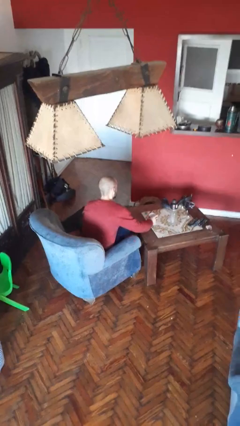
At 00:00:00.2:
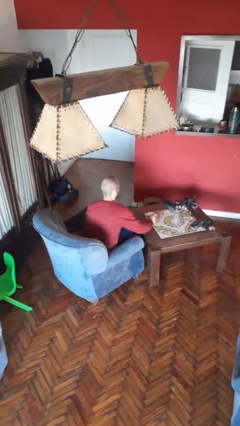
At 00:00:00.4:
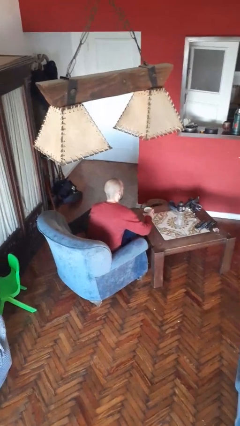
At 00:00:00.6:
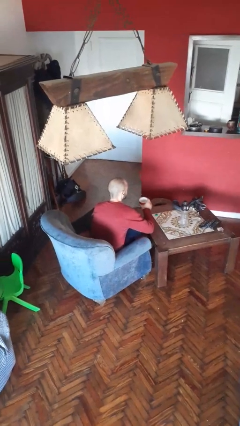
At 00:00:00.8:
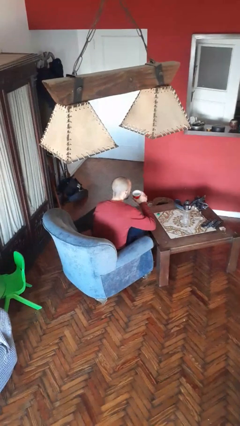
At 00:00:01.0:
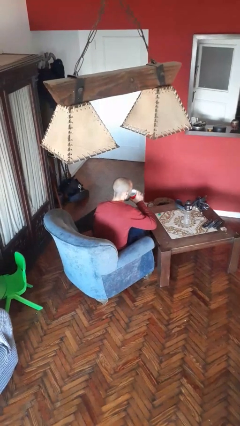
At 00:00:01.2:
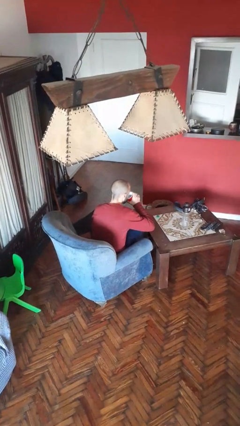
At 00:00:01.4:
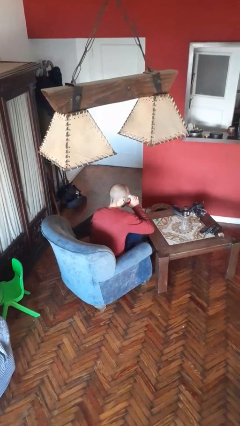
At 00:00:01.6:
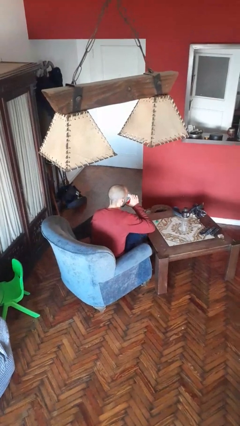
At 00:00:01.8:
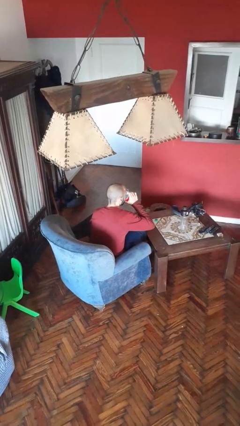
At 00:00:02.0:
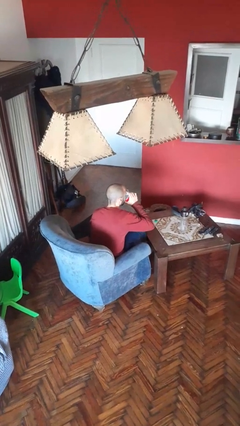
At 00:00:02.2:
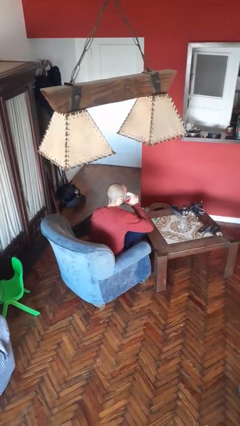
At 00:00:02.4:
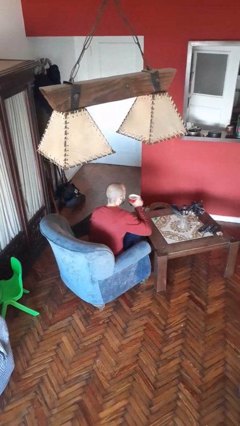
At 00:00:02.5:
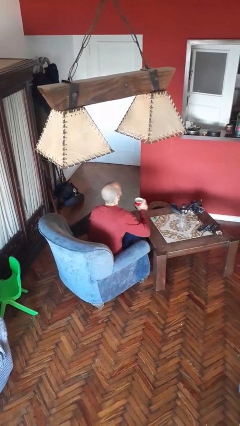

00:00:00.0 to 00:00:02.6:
person drinks from cup

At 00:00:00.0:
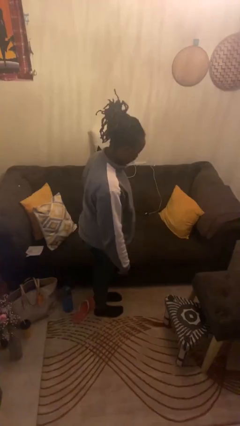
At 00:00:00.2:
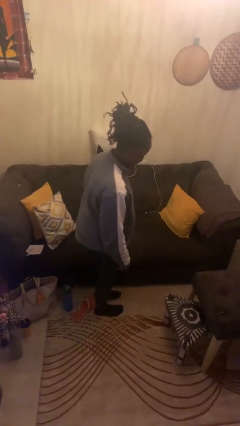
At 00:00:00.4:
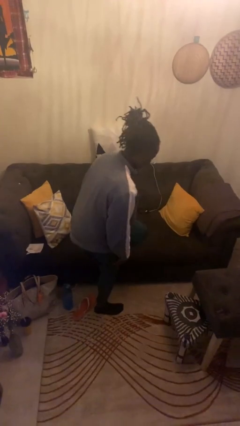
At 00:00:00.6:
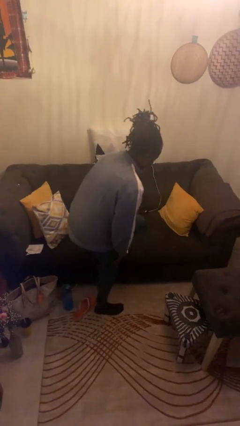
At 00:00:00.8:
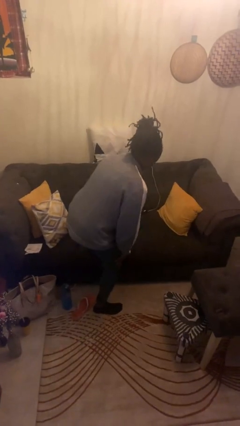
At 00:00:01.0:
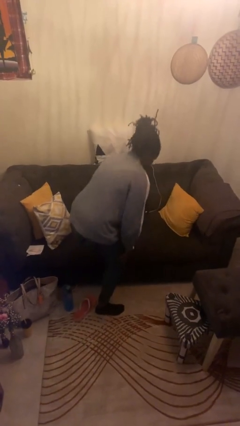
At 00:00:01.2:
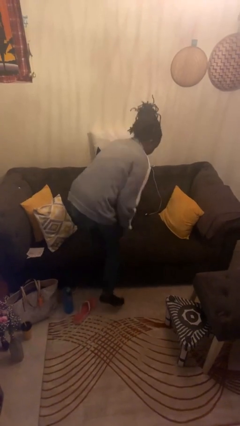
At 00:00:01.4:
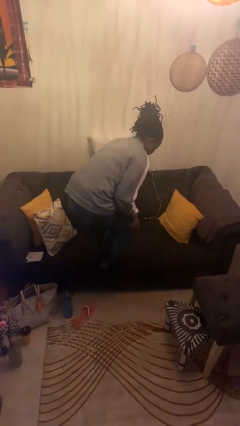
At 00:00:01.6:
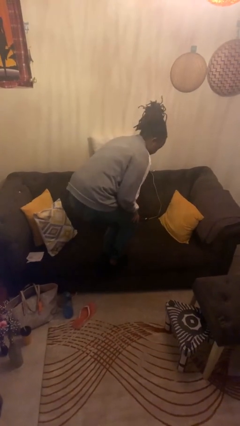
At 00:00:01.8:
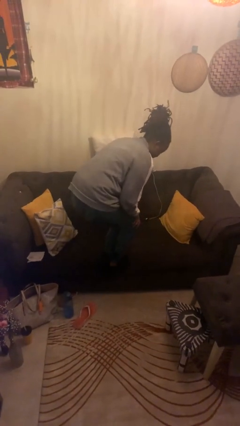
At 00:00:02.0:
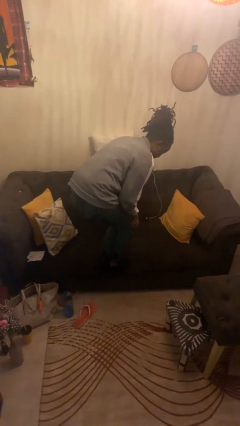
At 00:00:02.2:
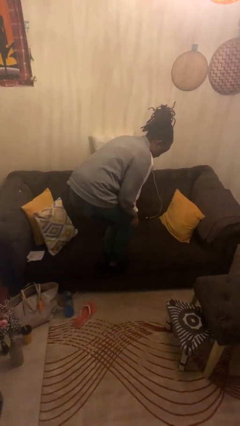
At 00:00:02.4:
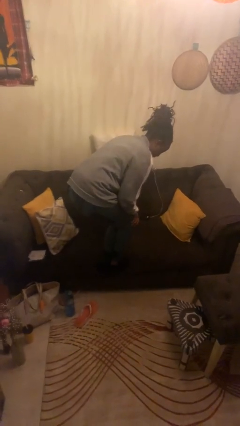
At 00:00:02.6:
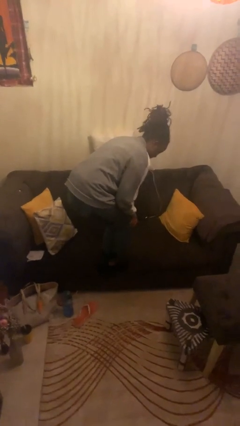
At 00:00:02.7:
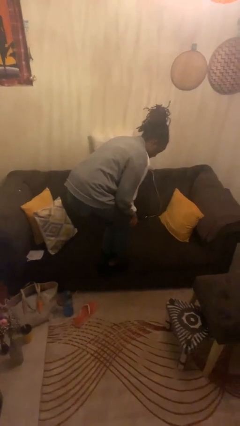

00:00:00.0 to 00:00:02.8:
person climbs on chair

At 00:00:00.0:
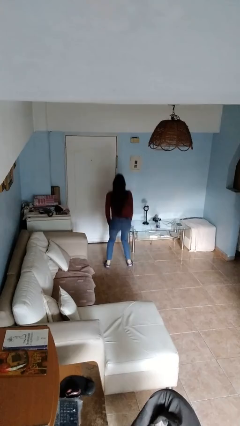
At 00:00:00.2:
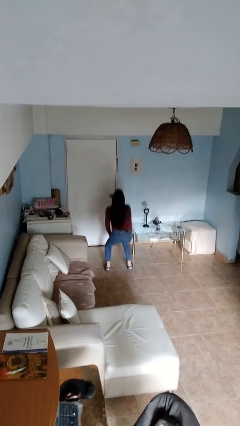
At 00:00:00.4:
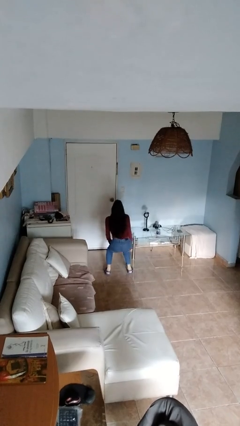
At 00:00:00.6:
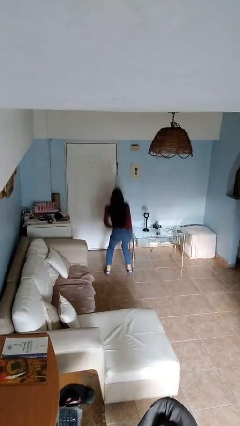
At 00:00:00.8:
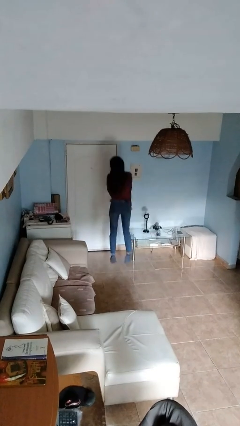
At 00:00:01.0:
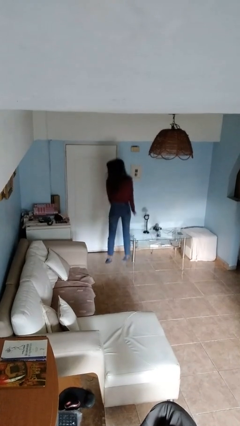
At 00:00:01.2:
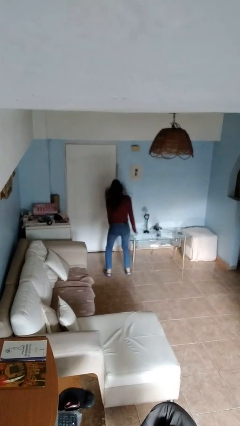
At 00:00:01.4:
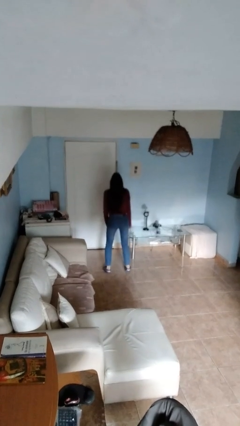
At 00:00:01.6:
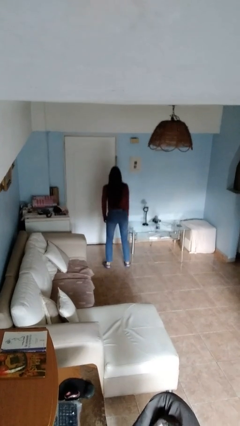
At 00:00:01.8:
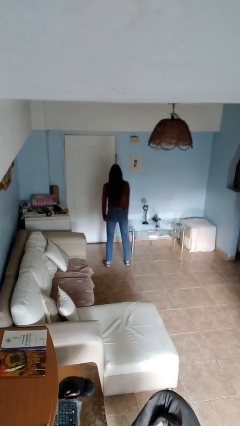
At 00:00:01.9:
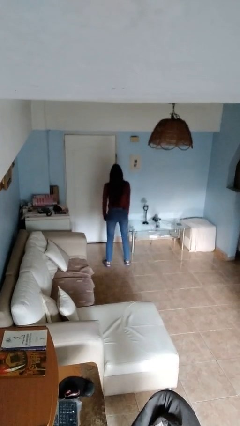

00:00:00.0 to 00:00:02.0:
person jumps

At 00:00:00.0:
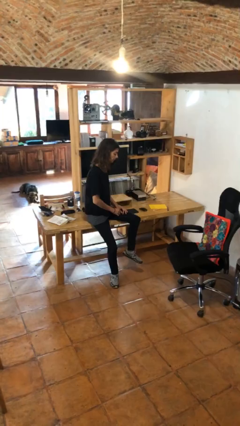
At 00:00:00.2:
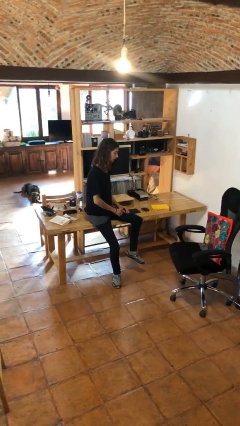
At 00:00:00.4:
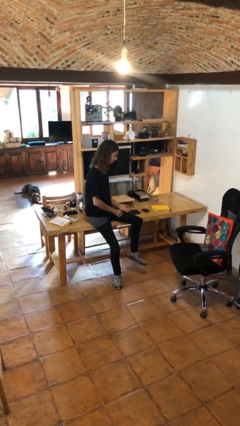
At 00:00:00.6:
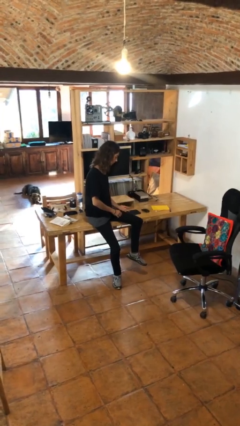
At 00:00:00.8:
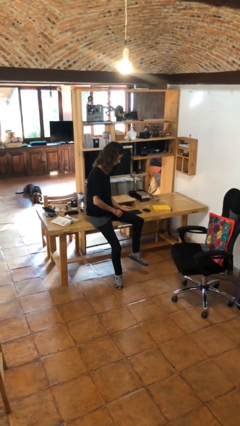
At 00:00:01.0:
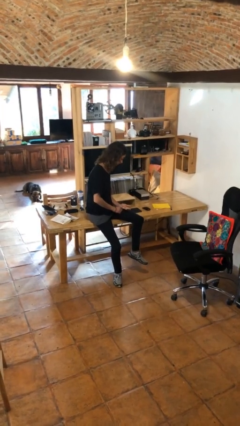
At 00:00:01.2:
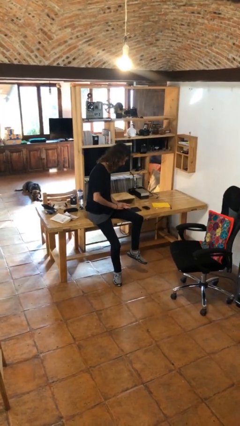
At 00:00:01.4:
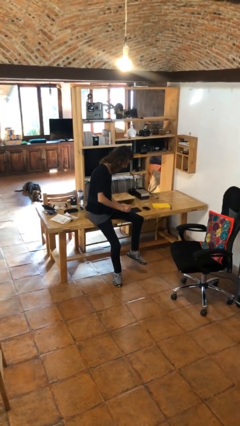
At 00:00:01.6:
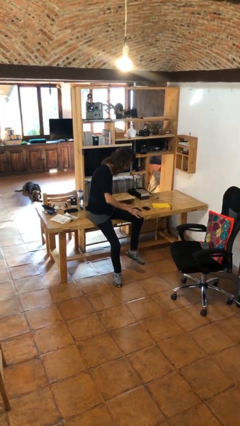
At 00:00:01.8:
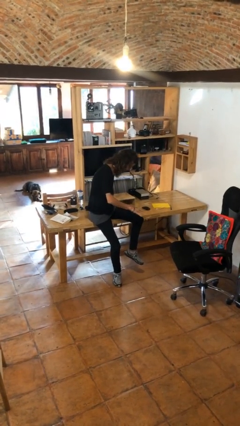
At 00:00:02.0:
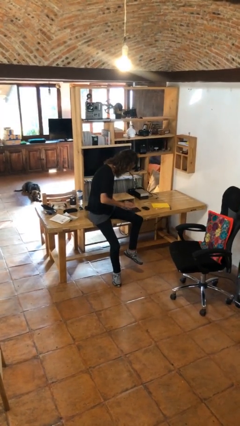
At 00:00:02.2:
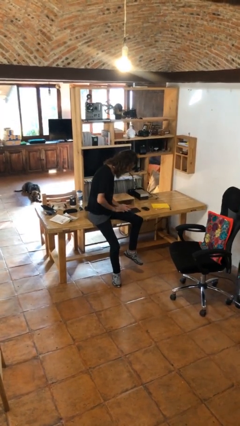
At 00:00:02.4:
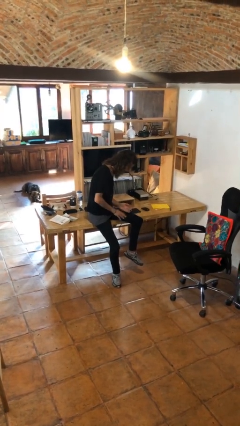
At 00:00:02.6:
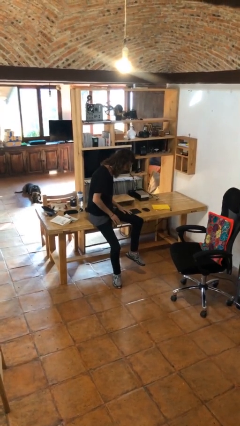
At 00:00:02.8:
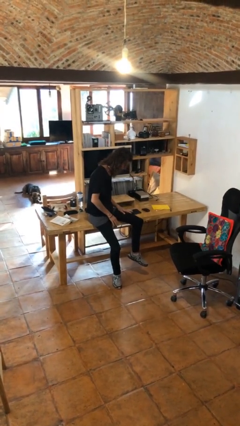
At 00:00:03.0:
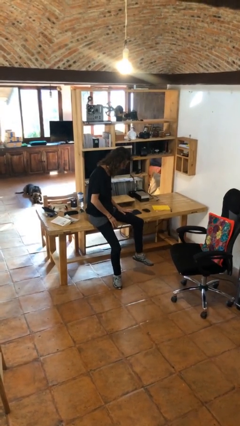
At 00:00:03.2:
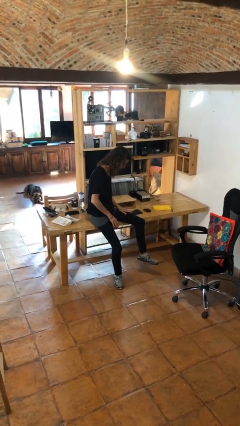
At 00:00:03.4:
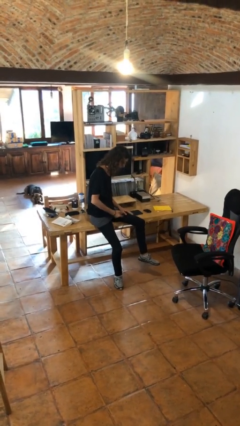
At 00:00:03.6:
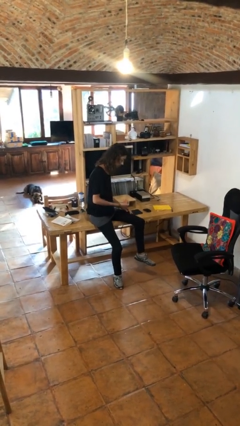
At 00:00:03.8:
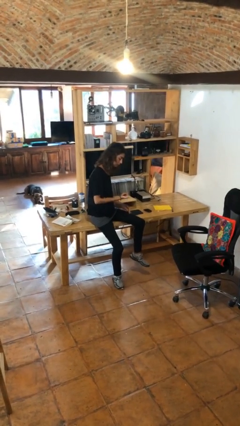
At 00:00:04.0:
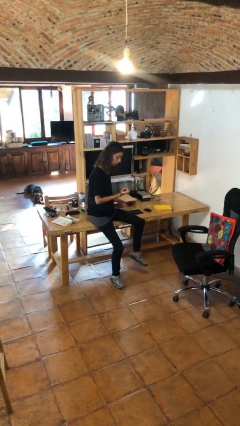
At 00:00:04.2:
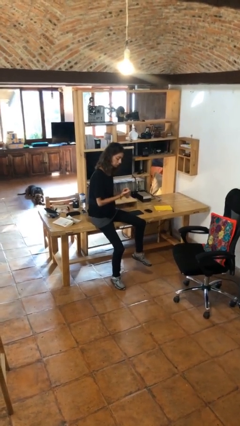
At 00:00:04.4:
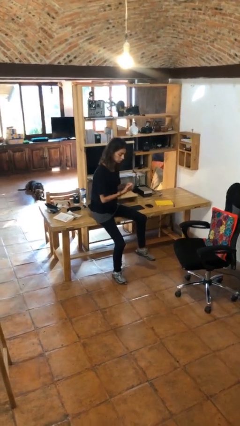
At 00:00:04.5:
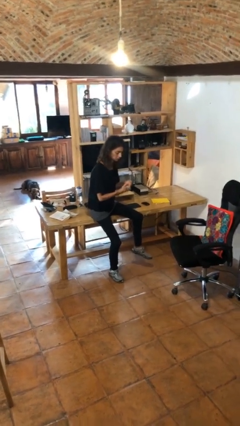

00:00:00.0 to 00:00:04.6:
person looks at hands in lap

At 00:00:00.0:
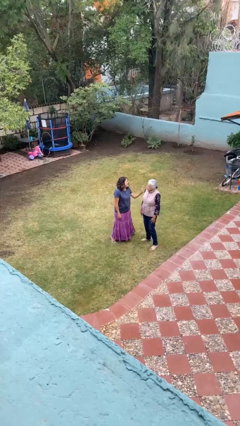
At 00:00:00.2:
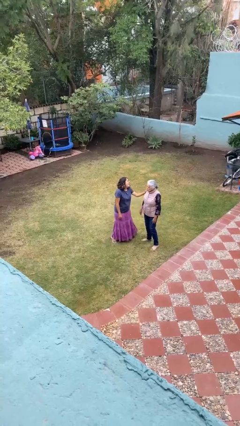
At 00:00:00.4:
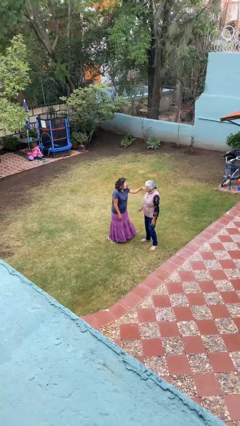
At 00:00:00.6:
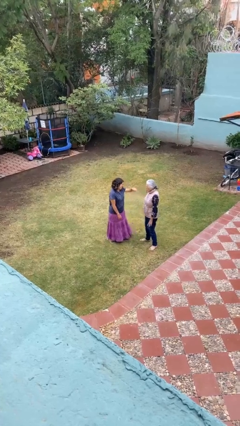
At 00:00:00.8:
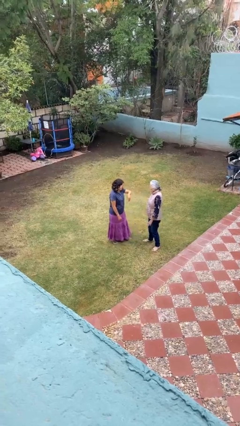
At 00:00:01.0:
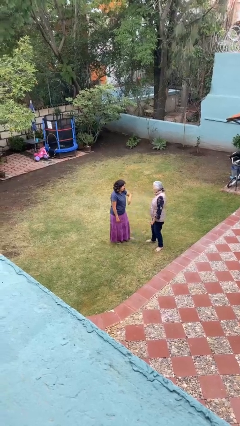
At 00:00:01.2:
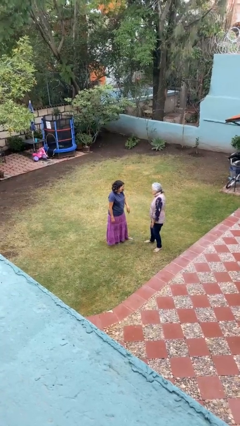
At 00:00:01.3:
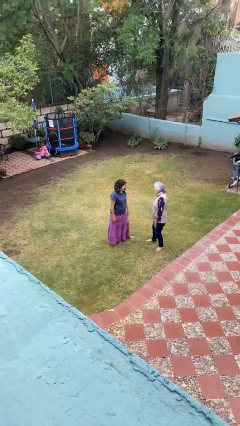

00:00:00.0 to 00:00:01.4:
person shoves person

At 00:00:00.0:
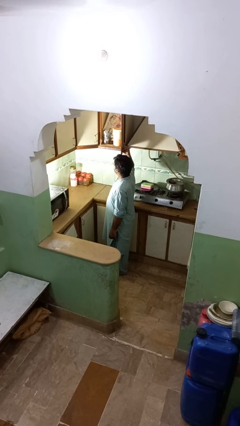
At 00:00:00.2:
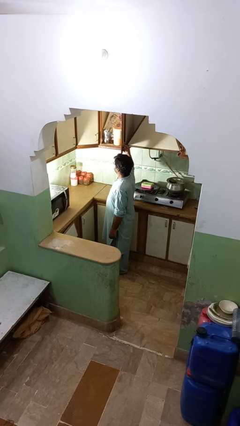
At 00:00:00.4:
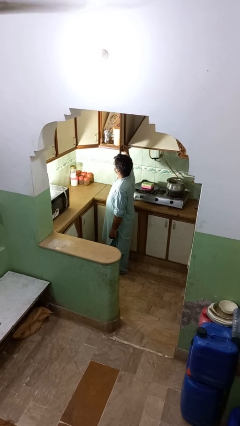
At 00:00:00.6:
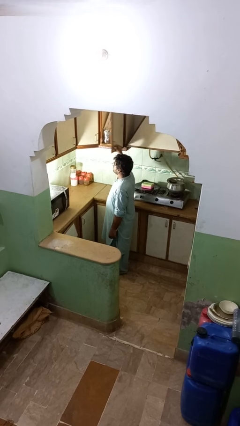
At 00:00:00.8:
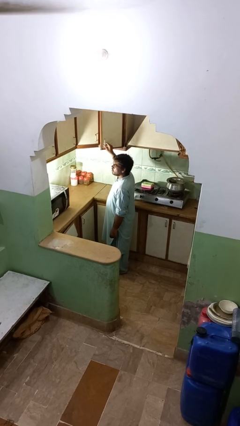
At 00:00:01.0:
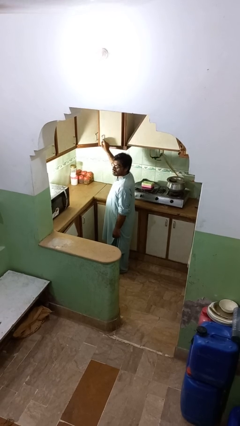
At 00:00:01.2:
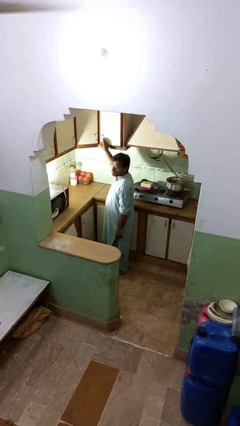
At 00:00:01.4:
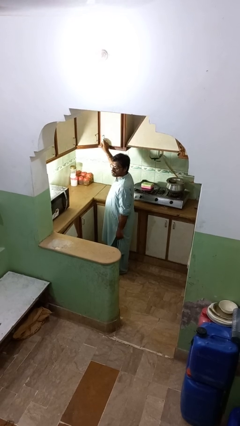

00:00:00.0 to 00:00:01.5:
person closes kitchen drawer

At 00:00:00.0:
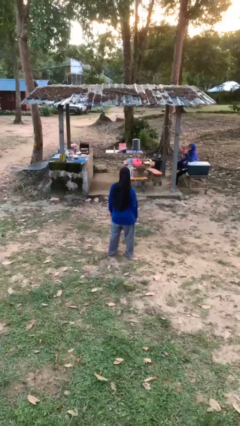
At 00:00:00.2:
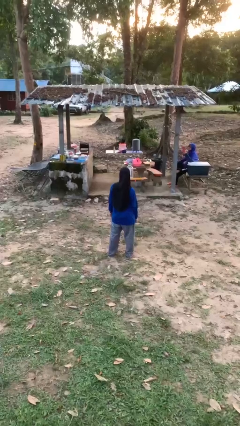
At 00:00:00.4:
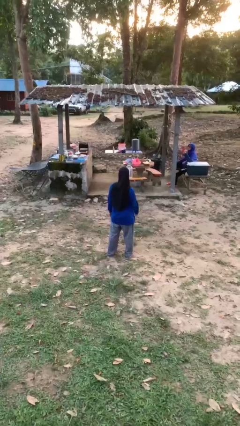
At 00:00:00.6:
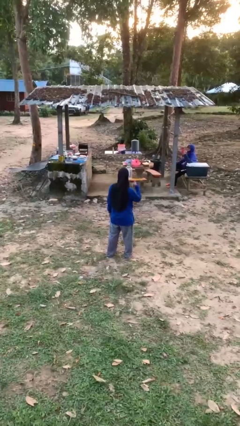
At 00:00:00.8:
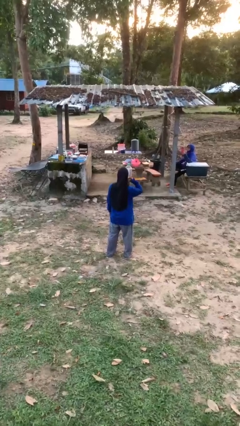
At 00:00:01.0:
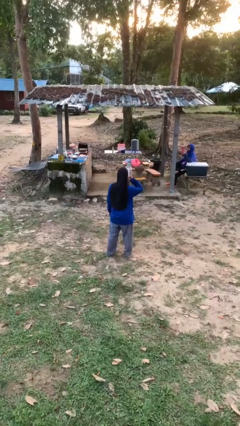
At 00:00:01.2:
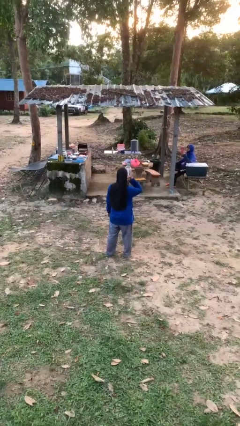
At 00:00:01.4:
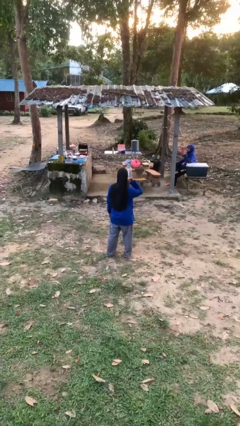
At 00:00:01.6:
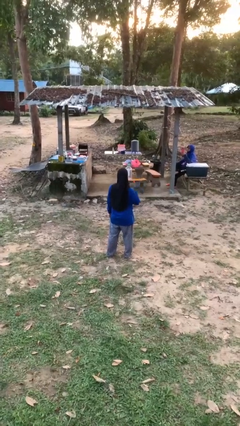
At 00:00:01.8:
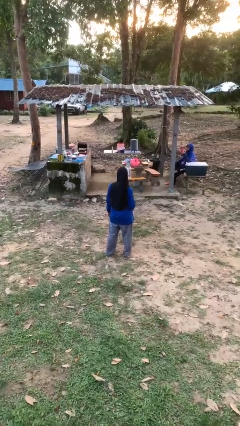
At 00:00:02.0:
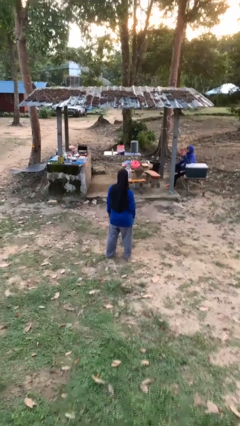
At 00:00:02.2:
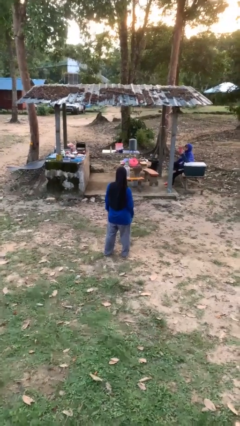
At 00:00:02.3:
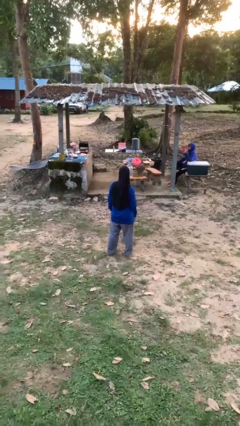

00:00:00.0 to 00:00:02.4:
person gestures call me
